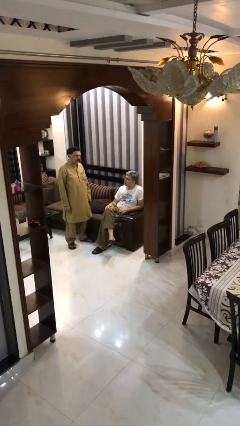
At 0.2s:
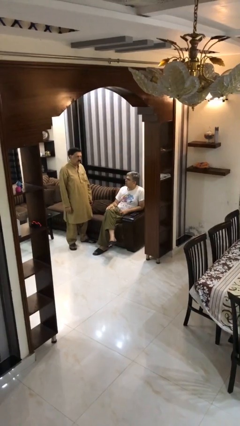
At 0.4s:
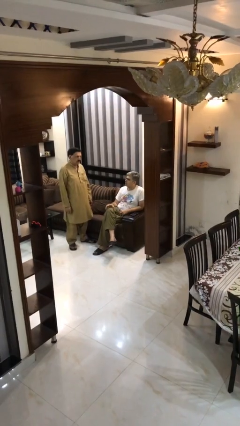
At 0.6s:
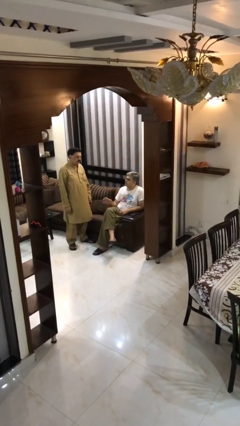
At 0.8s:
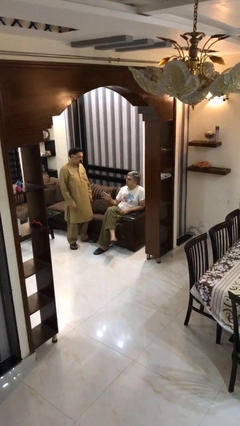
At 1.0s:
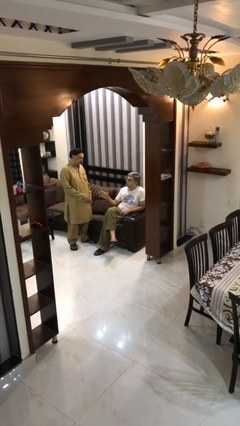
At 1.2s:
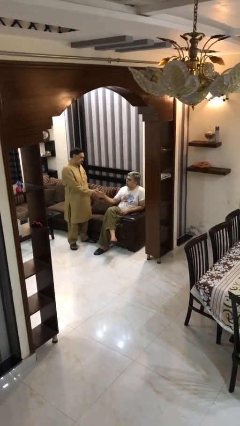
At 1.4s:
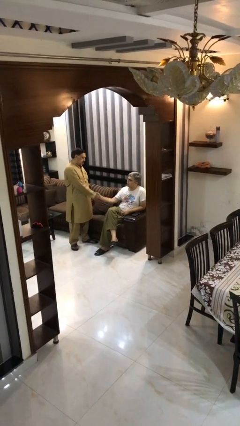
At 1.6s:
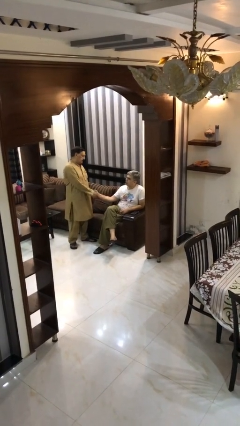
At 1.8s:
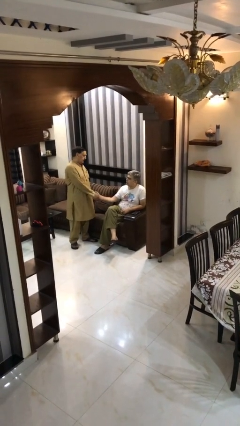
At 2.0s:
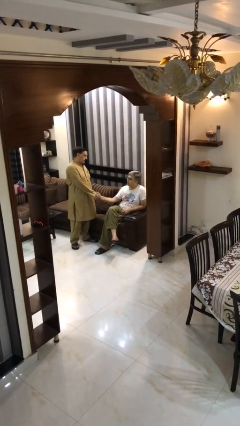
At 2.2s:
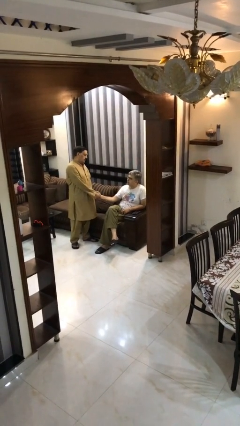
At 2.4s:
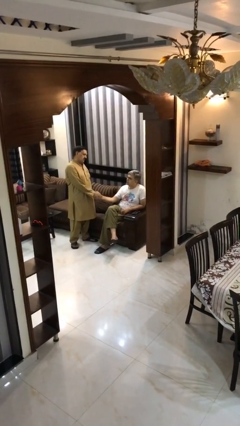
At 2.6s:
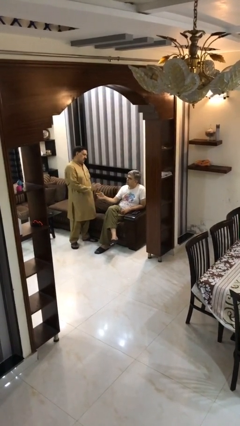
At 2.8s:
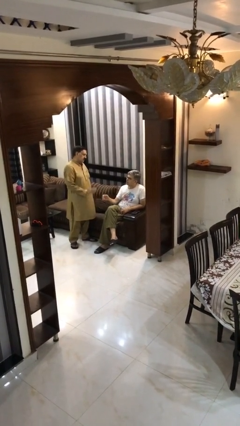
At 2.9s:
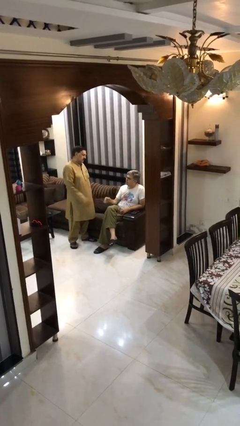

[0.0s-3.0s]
person shakes hand

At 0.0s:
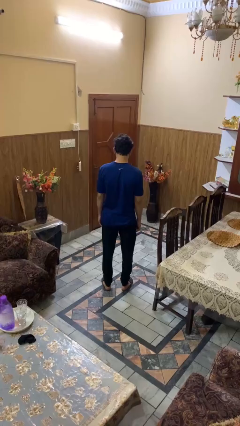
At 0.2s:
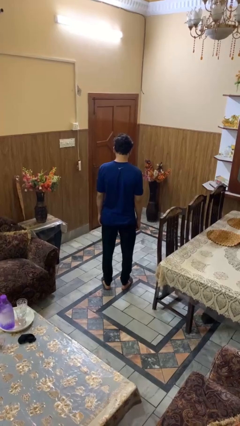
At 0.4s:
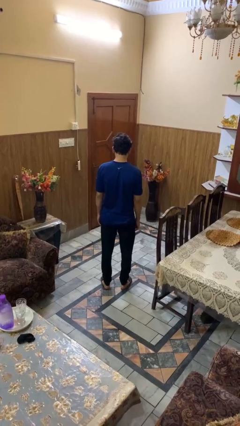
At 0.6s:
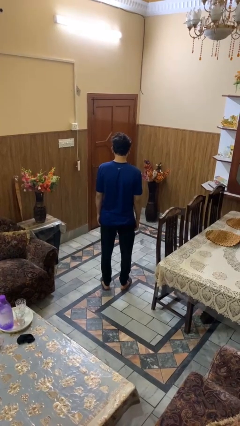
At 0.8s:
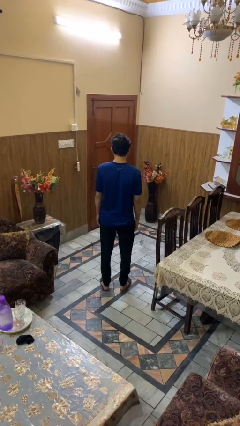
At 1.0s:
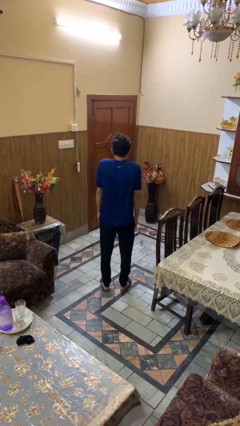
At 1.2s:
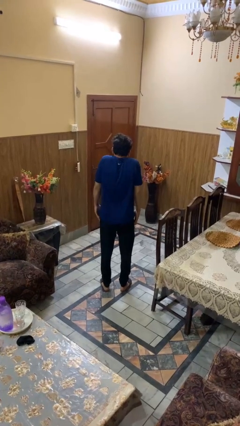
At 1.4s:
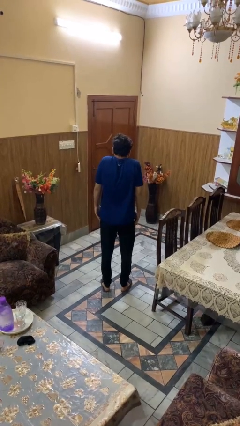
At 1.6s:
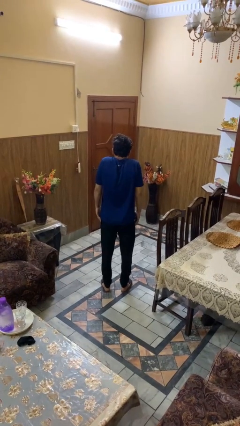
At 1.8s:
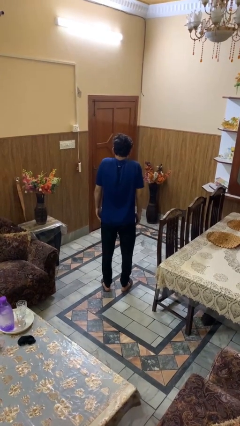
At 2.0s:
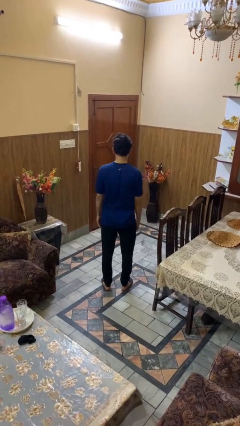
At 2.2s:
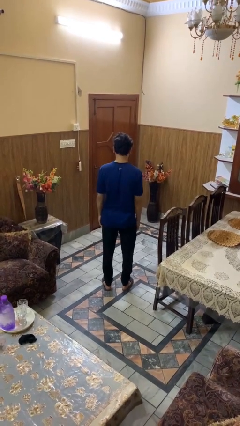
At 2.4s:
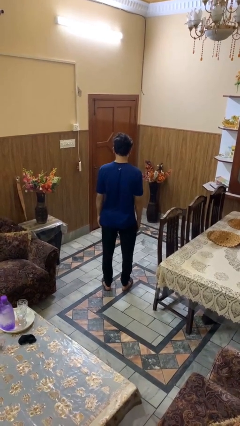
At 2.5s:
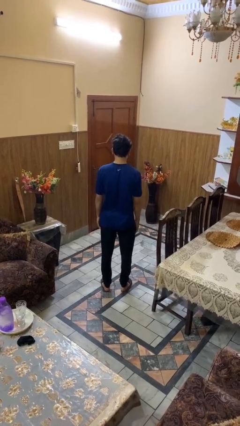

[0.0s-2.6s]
person shrugs

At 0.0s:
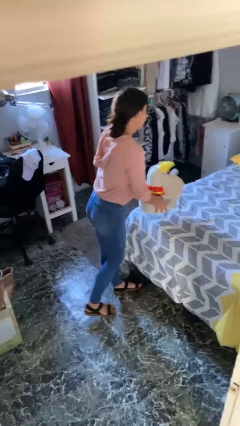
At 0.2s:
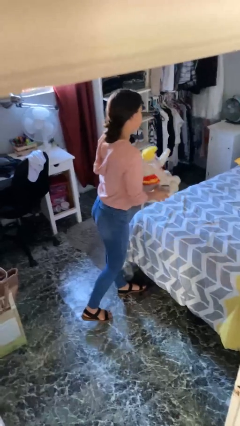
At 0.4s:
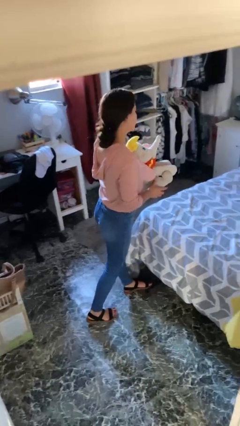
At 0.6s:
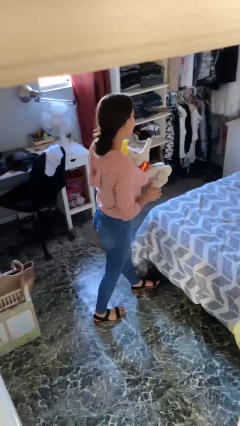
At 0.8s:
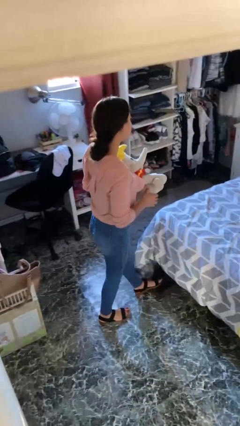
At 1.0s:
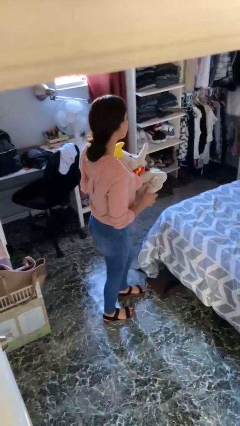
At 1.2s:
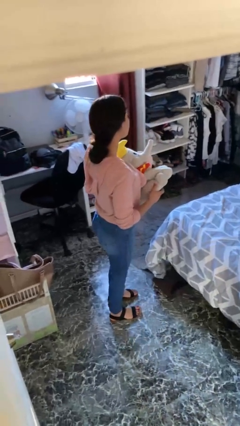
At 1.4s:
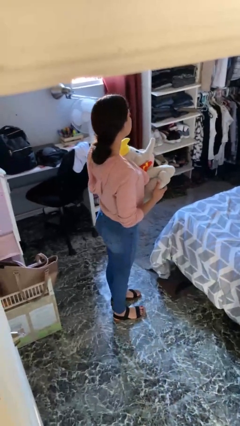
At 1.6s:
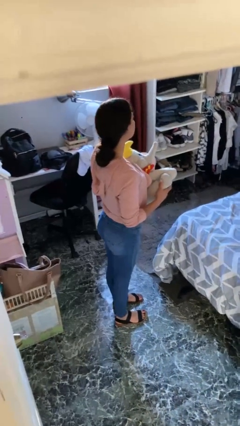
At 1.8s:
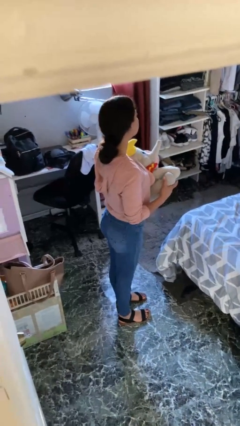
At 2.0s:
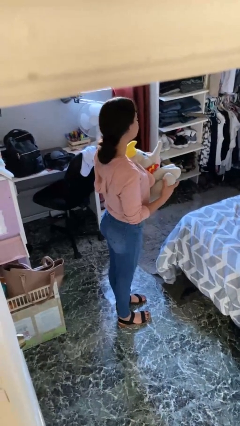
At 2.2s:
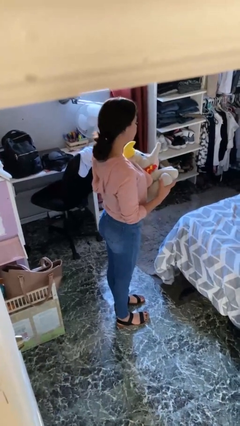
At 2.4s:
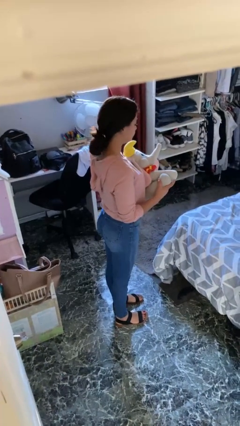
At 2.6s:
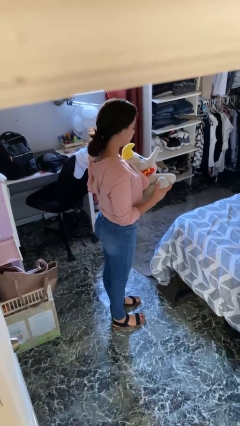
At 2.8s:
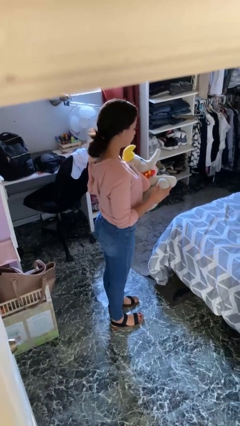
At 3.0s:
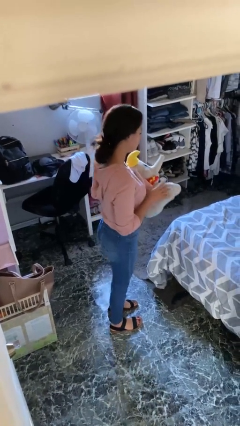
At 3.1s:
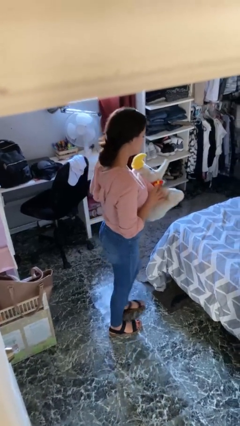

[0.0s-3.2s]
person picks up object from bed

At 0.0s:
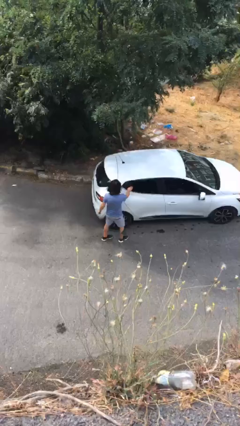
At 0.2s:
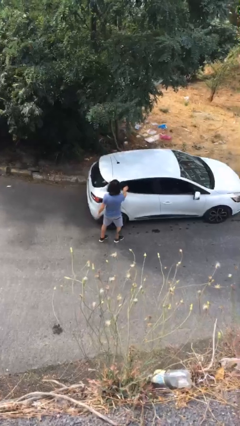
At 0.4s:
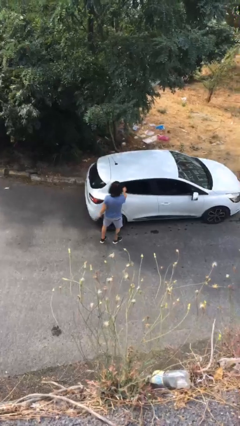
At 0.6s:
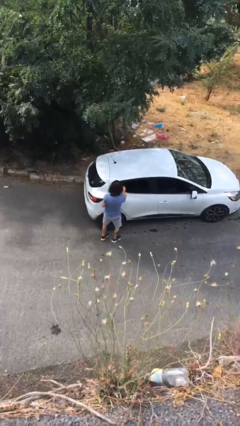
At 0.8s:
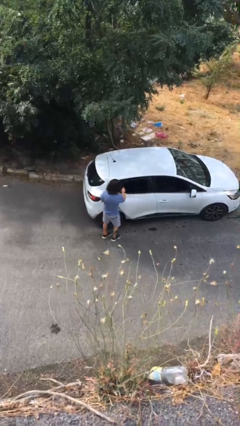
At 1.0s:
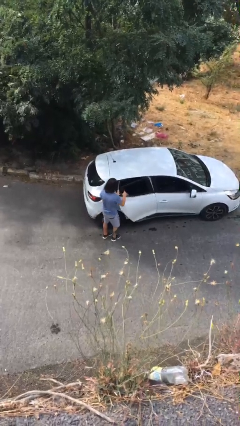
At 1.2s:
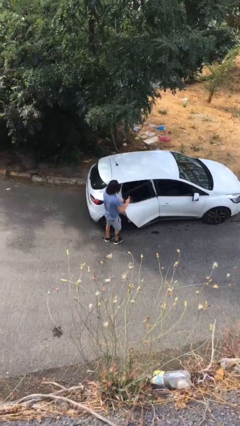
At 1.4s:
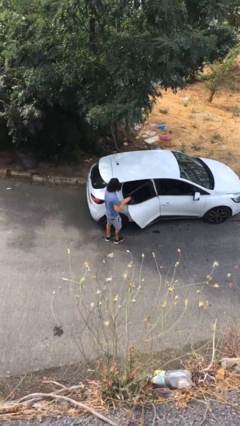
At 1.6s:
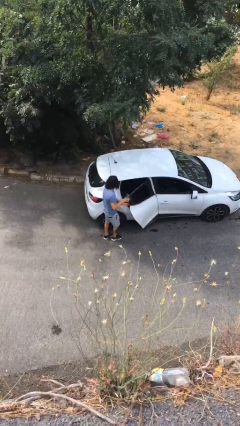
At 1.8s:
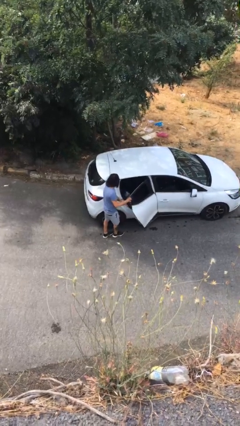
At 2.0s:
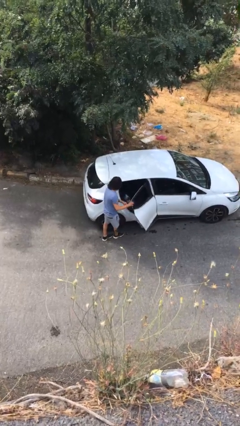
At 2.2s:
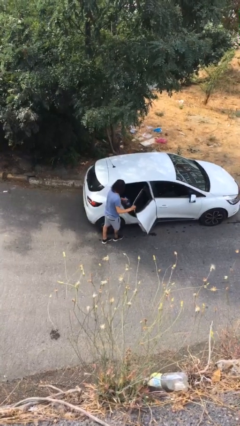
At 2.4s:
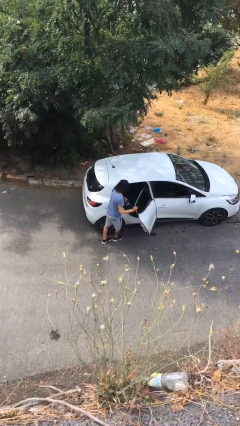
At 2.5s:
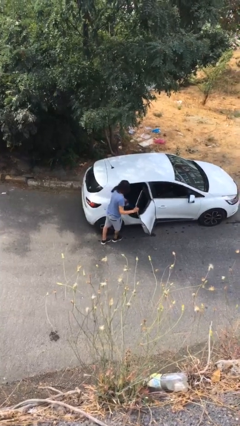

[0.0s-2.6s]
person opens car door

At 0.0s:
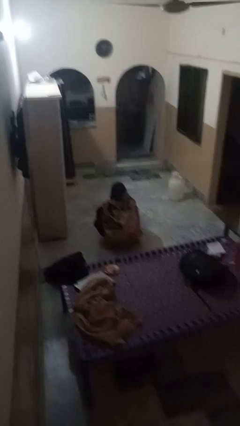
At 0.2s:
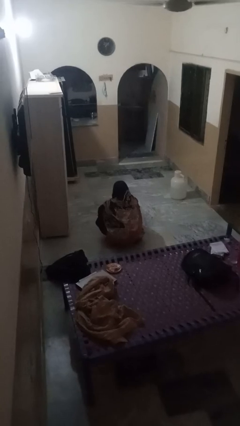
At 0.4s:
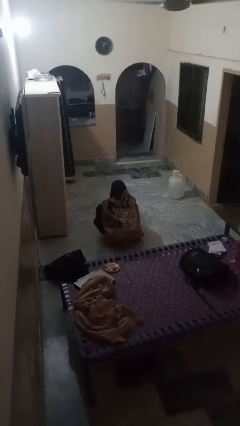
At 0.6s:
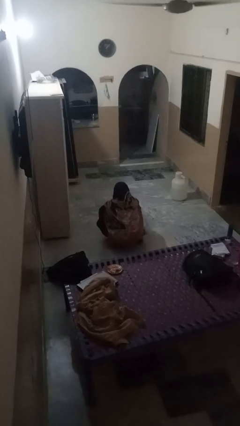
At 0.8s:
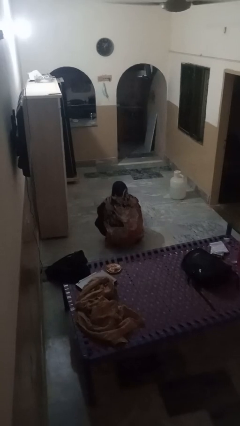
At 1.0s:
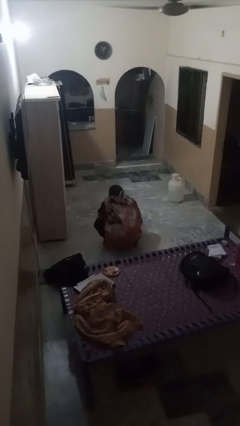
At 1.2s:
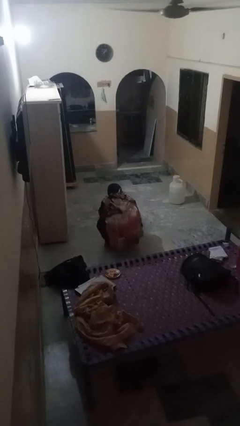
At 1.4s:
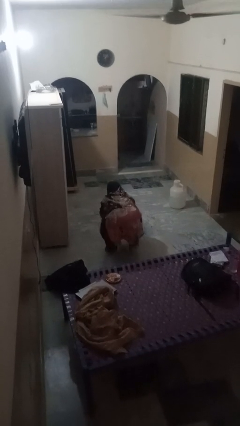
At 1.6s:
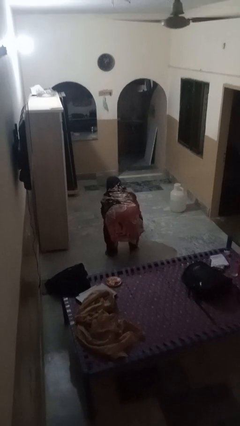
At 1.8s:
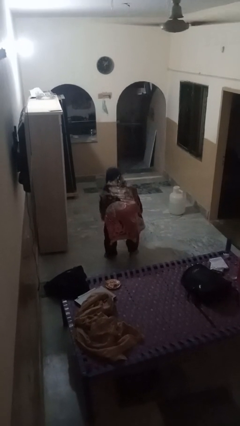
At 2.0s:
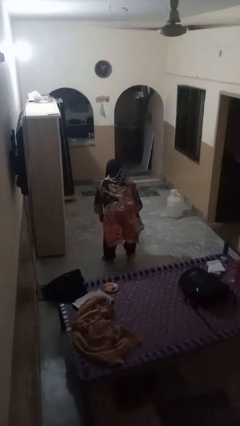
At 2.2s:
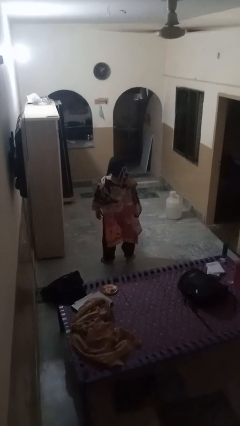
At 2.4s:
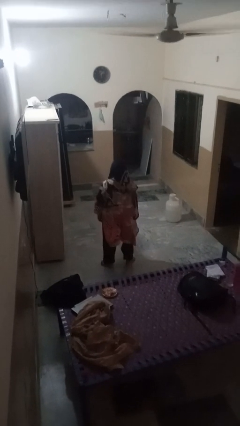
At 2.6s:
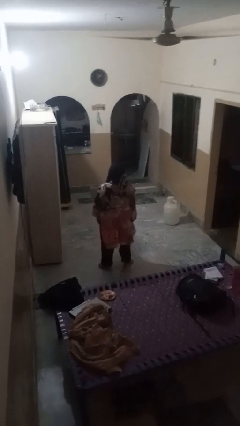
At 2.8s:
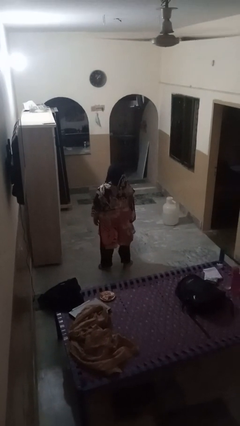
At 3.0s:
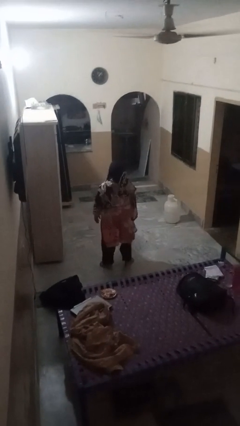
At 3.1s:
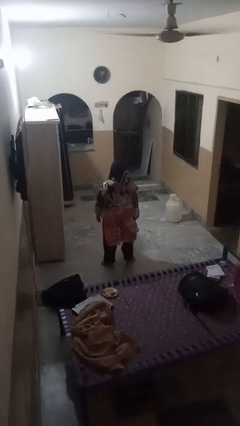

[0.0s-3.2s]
person stands up

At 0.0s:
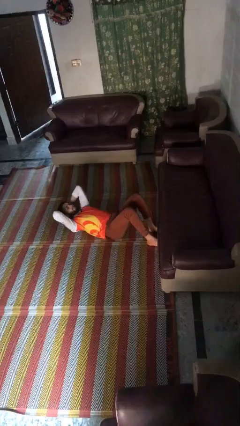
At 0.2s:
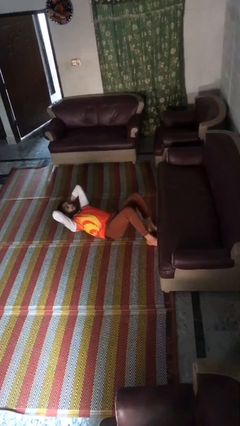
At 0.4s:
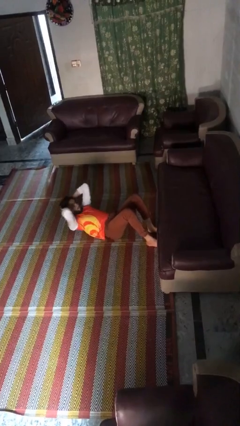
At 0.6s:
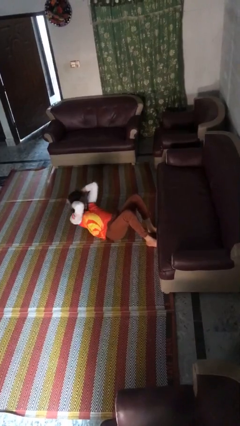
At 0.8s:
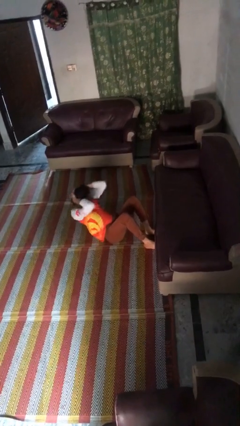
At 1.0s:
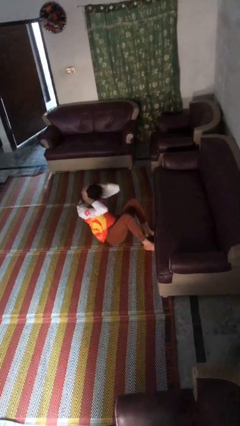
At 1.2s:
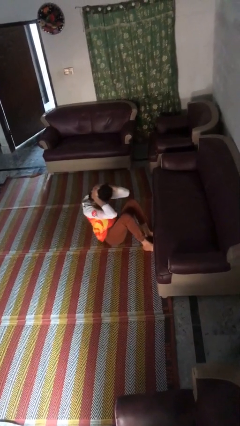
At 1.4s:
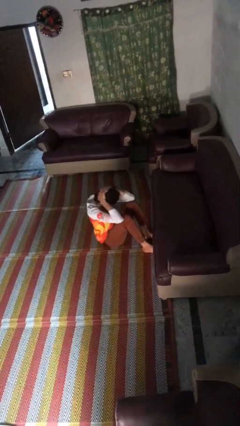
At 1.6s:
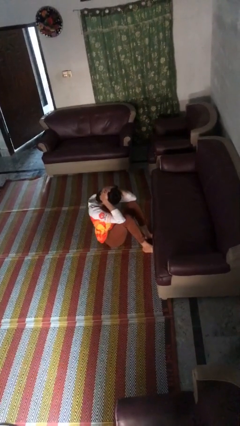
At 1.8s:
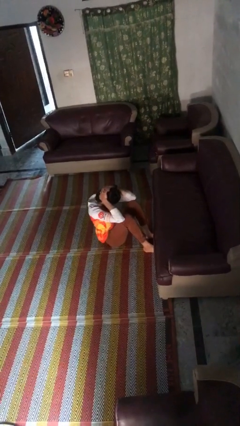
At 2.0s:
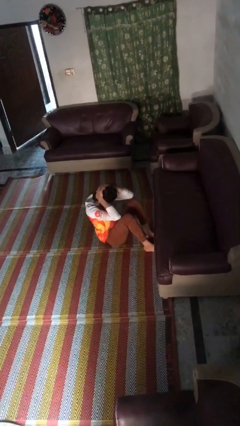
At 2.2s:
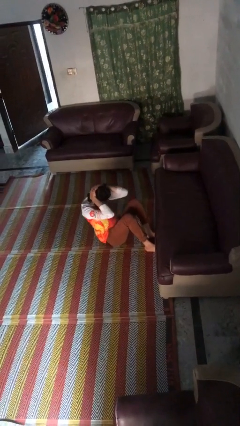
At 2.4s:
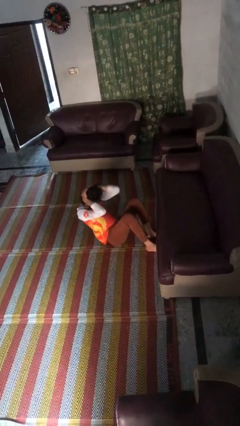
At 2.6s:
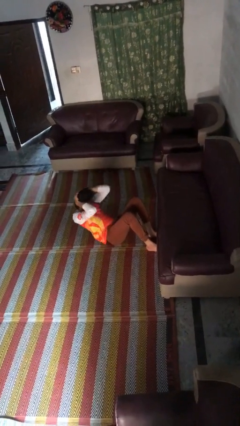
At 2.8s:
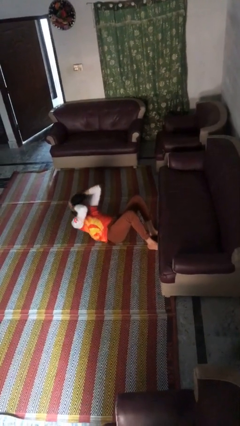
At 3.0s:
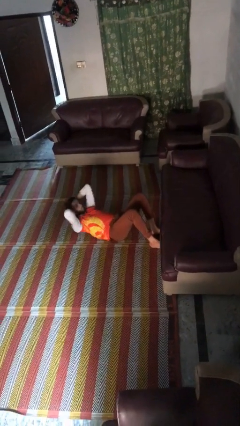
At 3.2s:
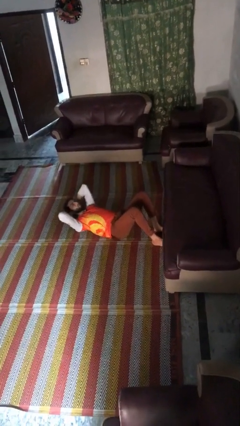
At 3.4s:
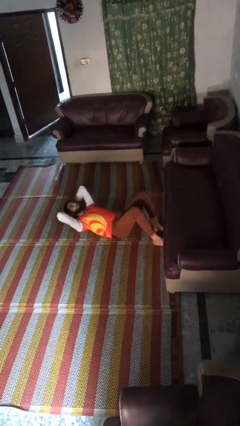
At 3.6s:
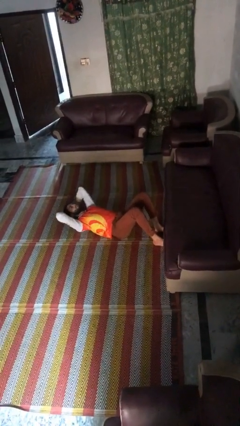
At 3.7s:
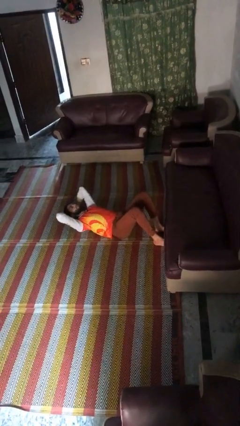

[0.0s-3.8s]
person exercises with situp
